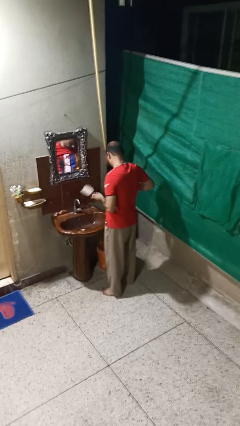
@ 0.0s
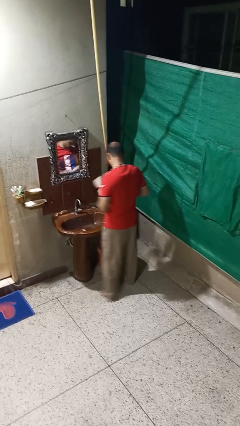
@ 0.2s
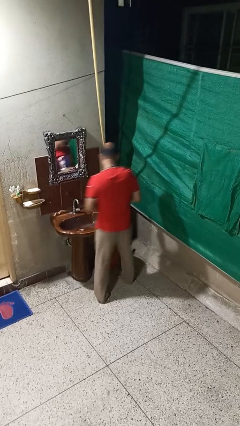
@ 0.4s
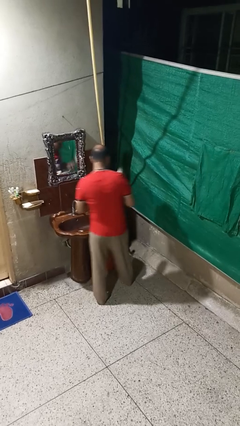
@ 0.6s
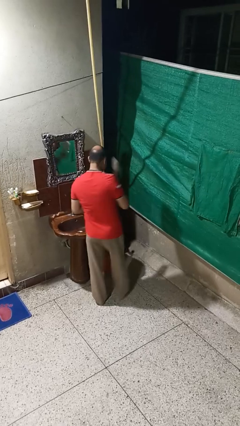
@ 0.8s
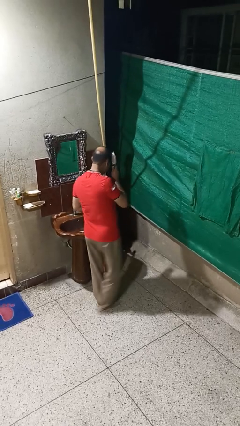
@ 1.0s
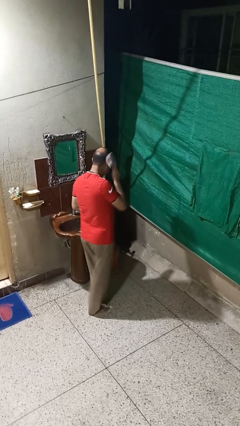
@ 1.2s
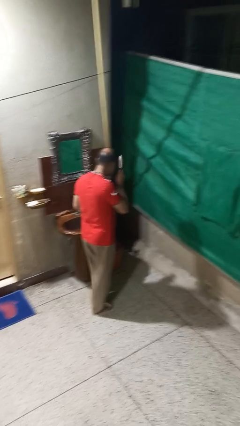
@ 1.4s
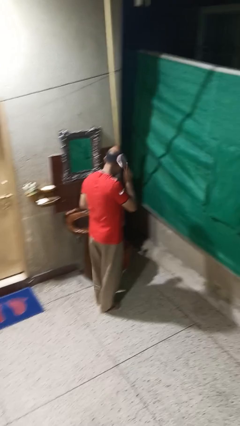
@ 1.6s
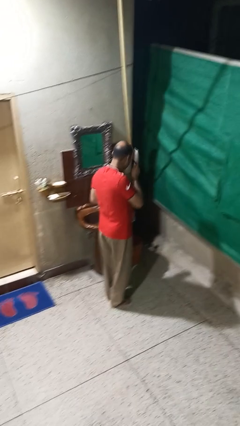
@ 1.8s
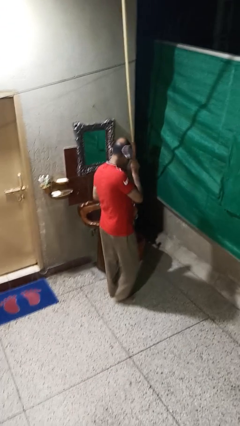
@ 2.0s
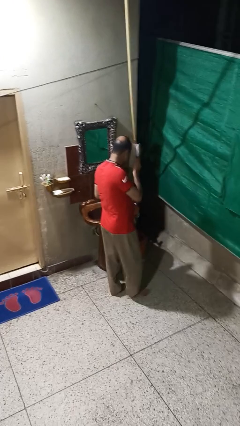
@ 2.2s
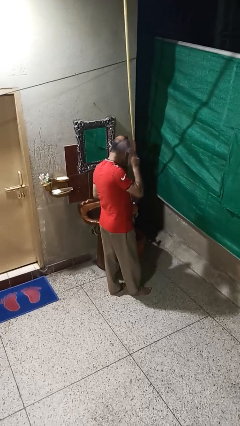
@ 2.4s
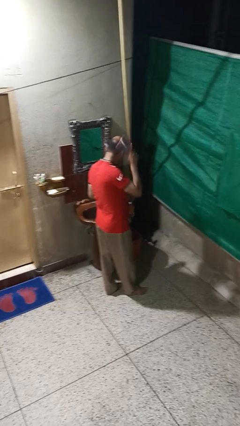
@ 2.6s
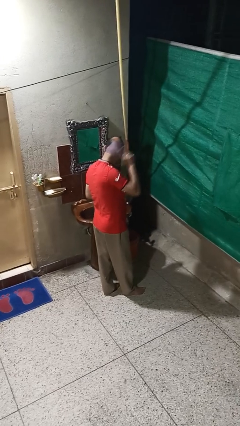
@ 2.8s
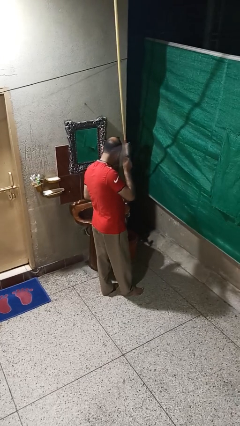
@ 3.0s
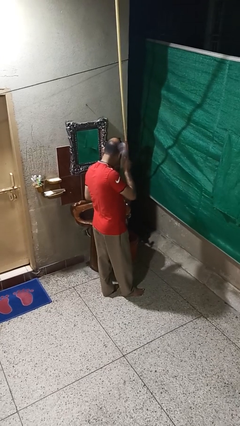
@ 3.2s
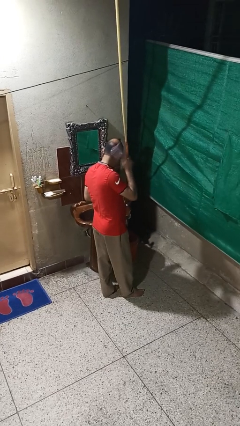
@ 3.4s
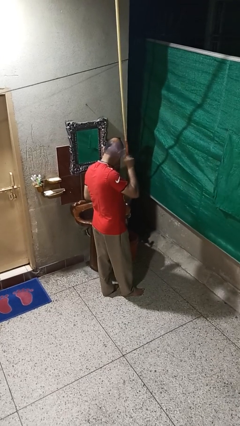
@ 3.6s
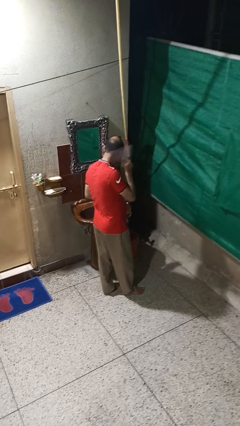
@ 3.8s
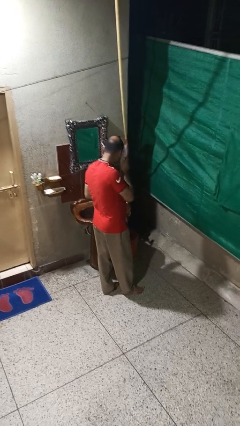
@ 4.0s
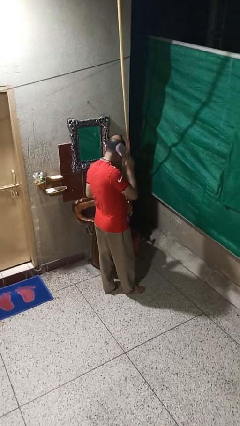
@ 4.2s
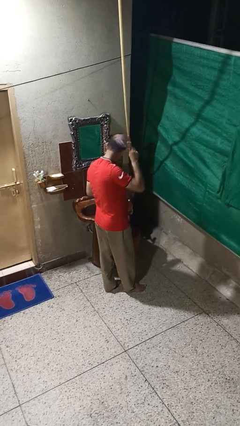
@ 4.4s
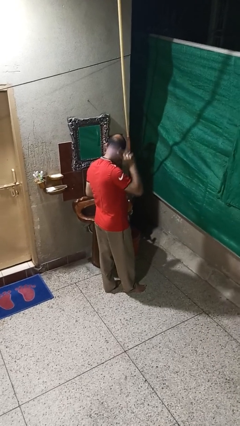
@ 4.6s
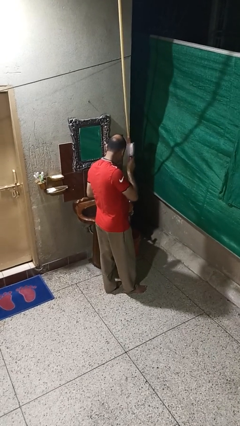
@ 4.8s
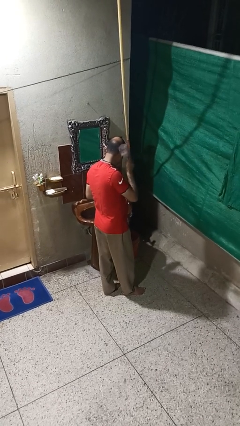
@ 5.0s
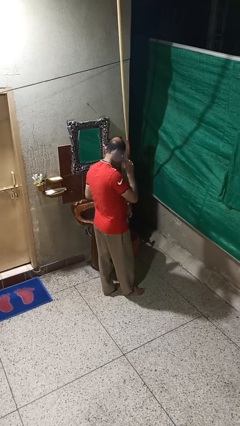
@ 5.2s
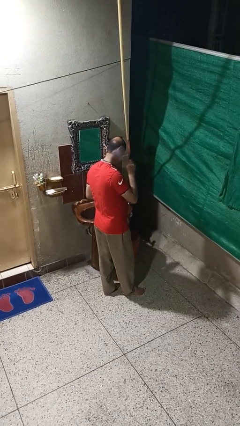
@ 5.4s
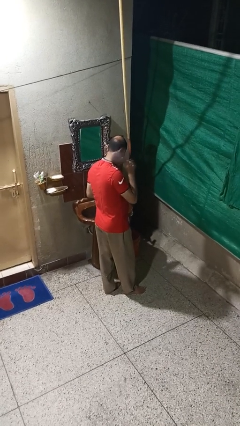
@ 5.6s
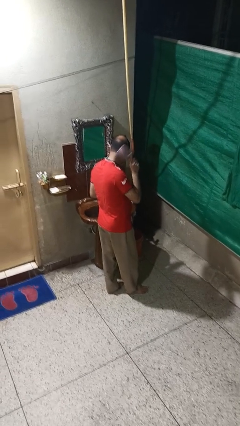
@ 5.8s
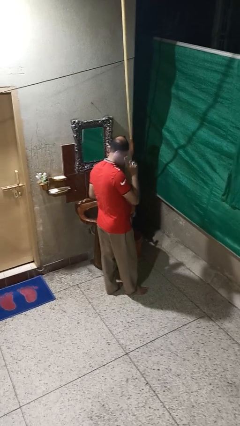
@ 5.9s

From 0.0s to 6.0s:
person brushes hair

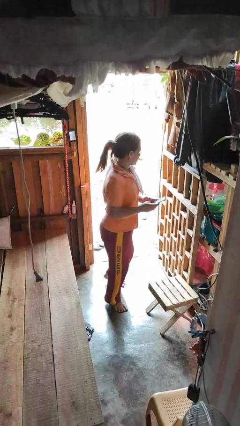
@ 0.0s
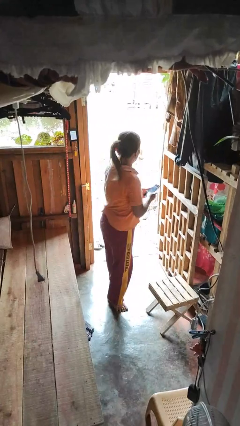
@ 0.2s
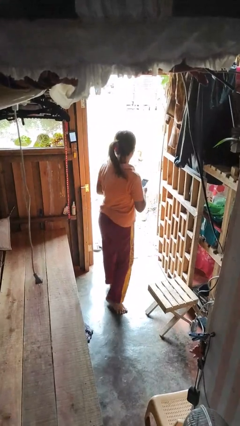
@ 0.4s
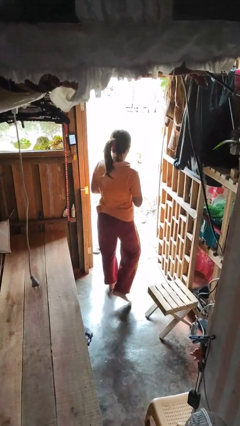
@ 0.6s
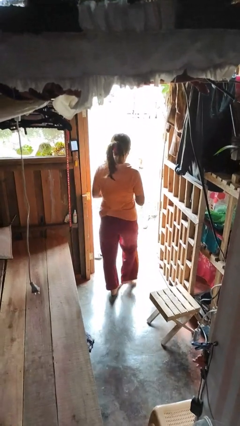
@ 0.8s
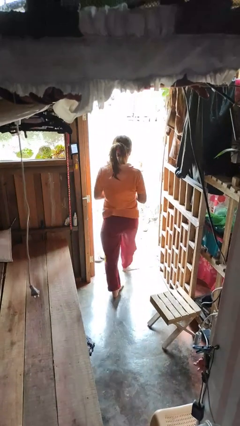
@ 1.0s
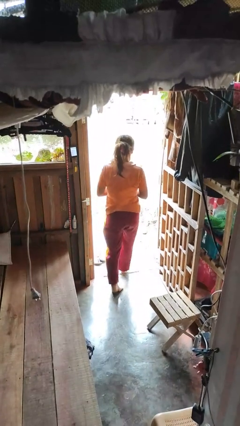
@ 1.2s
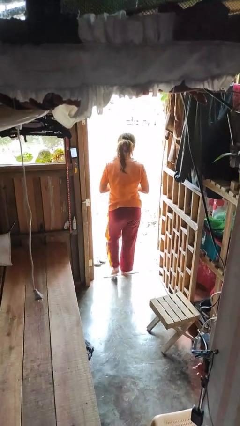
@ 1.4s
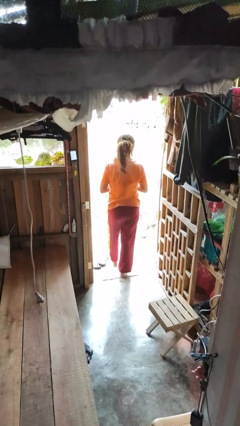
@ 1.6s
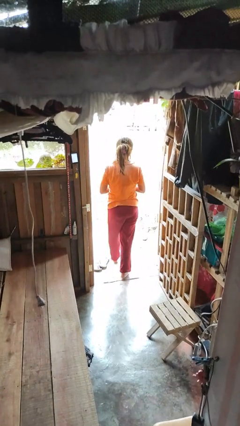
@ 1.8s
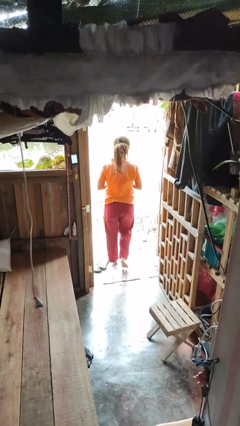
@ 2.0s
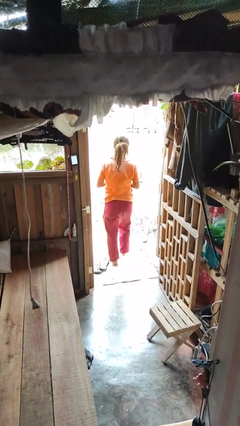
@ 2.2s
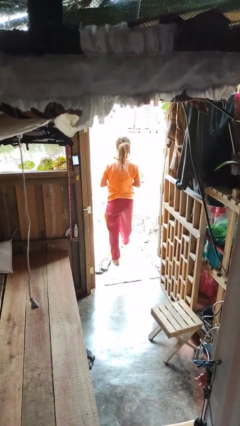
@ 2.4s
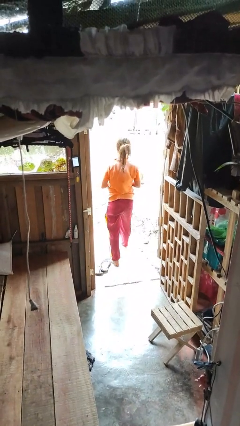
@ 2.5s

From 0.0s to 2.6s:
person exits scene through structure

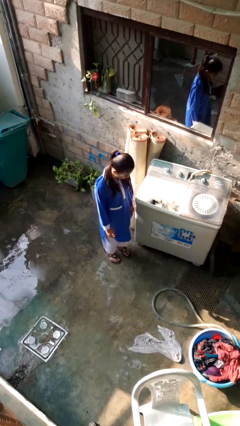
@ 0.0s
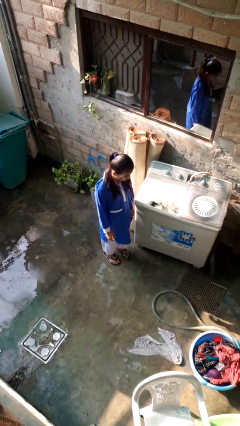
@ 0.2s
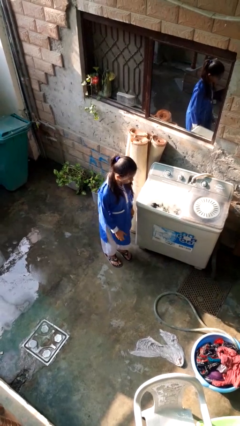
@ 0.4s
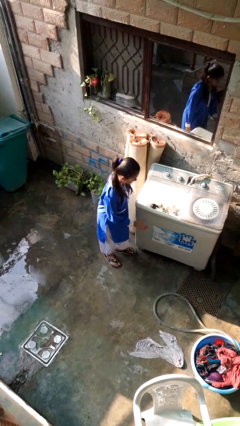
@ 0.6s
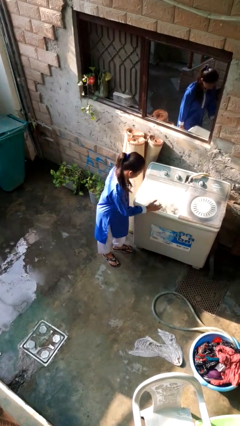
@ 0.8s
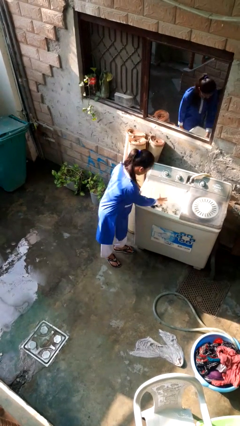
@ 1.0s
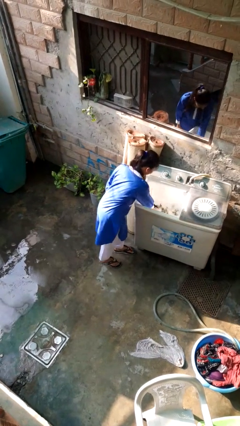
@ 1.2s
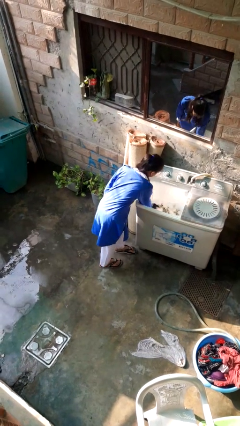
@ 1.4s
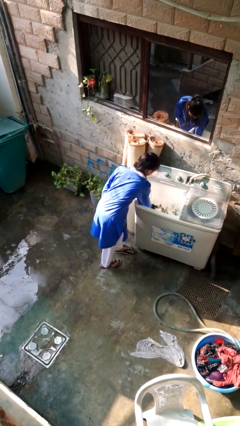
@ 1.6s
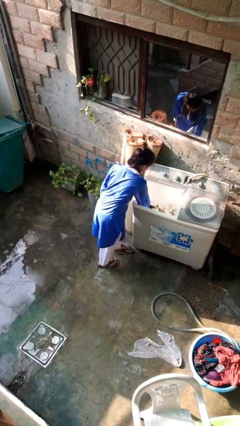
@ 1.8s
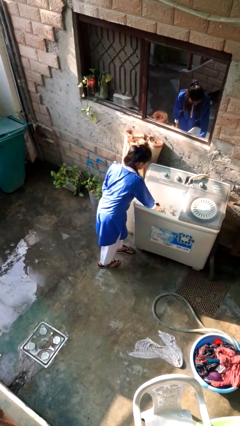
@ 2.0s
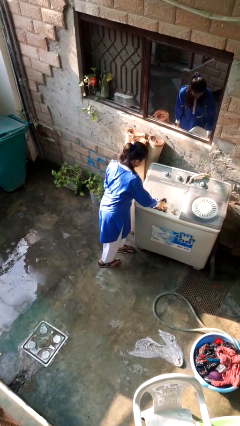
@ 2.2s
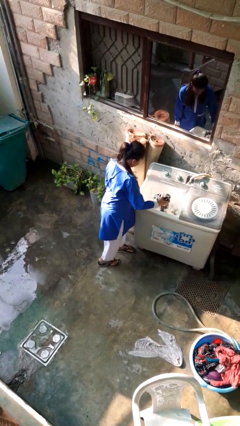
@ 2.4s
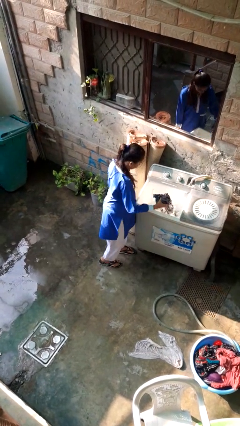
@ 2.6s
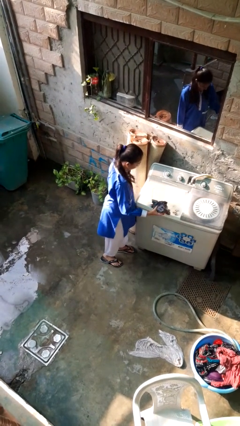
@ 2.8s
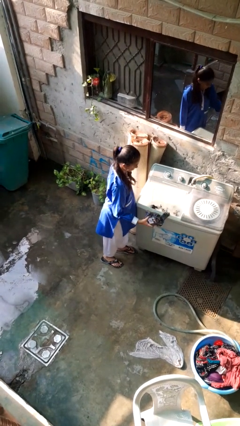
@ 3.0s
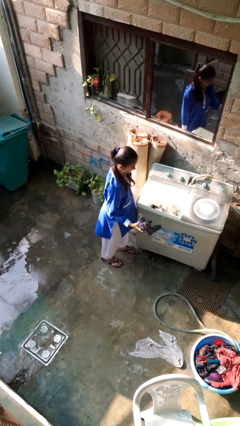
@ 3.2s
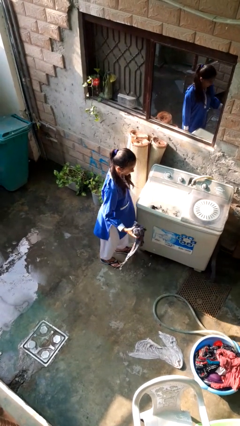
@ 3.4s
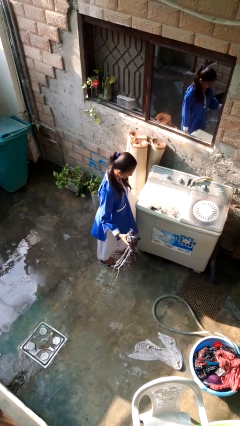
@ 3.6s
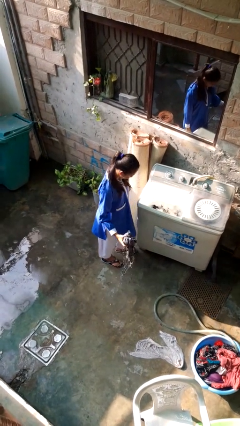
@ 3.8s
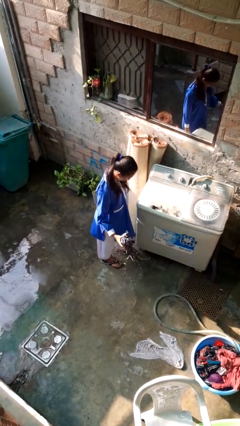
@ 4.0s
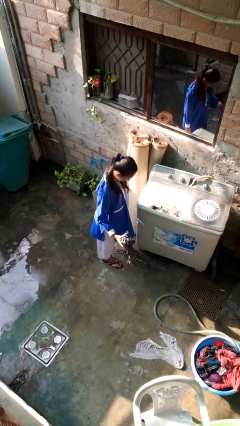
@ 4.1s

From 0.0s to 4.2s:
person unloads clotheswasher

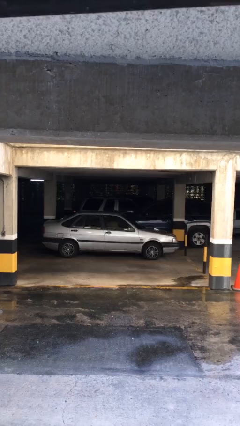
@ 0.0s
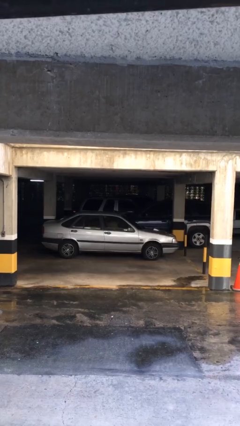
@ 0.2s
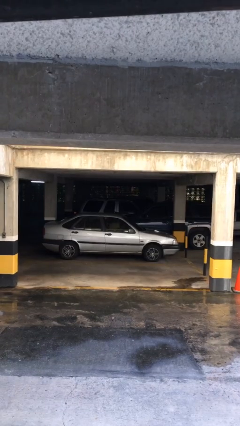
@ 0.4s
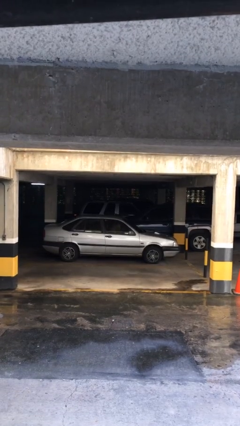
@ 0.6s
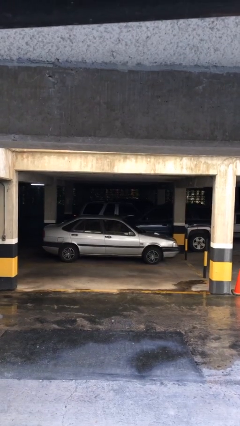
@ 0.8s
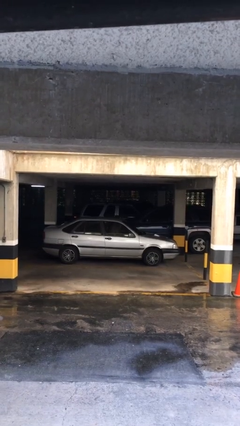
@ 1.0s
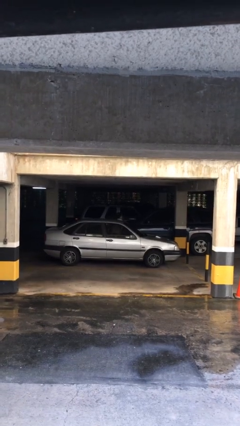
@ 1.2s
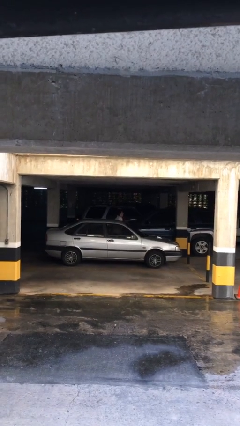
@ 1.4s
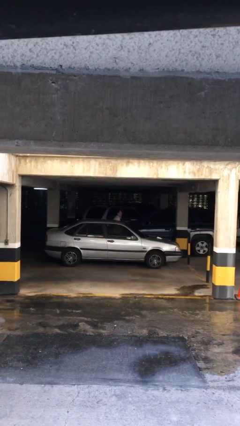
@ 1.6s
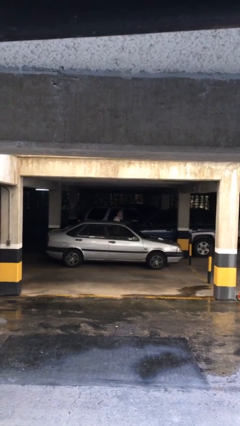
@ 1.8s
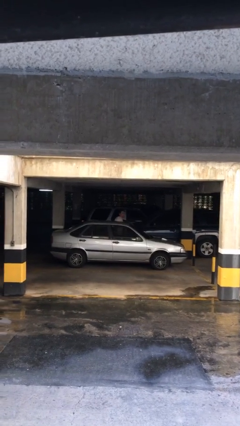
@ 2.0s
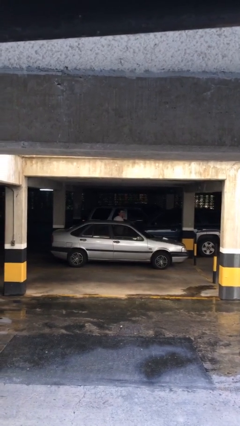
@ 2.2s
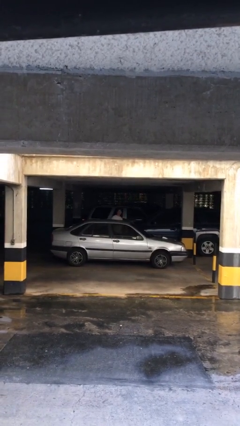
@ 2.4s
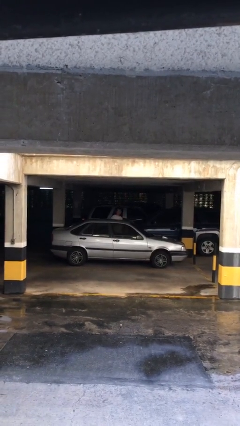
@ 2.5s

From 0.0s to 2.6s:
person exits car

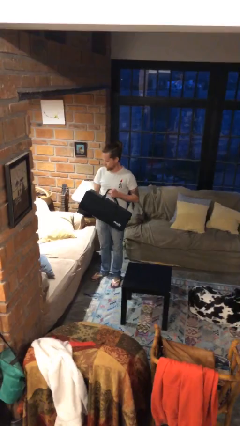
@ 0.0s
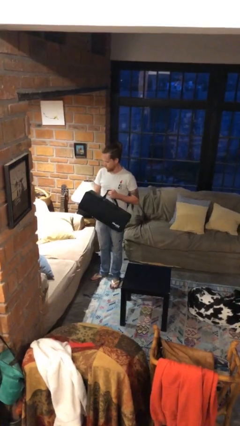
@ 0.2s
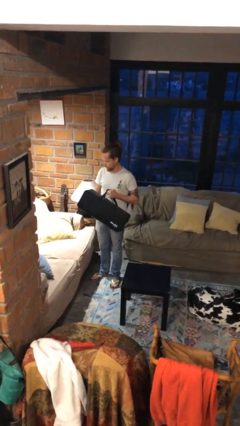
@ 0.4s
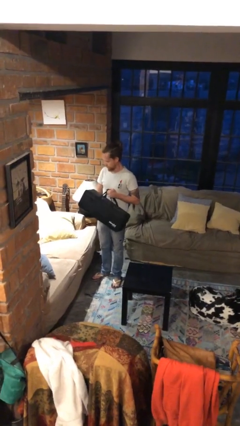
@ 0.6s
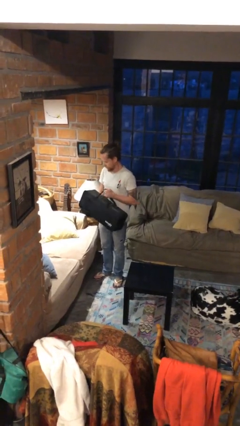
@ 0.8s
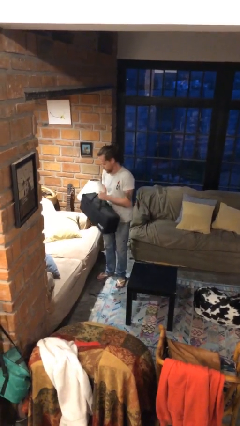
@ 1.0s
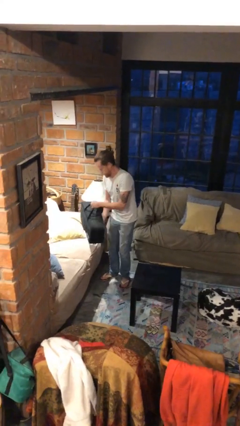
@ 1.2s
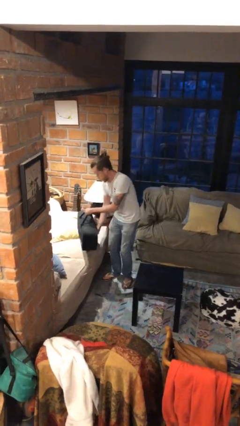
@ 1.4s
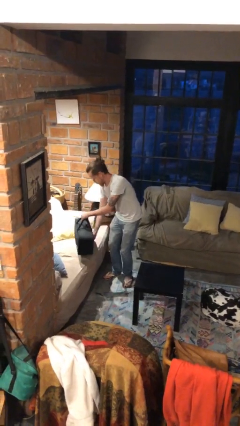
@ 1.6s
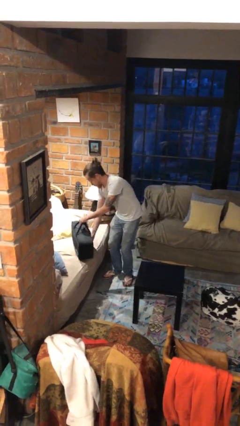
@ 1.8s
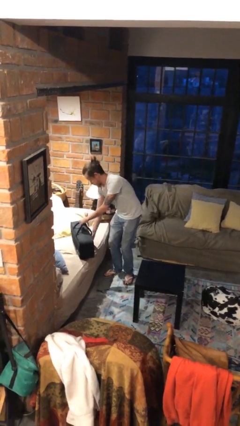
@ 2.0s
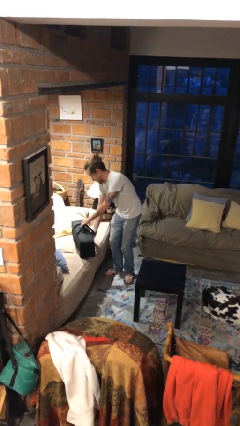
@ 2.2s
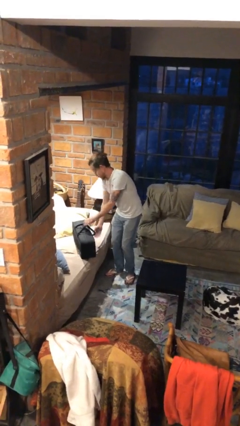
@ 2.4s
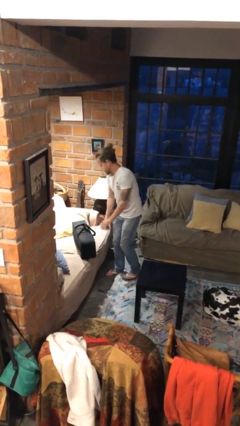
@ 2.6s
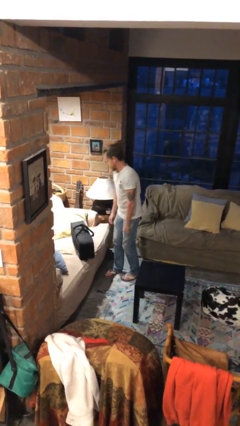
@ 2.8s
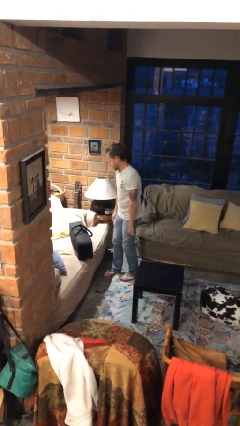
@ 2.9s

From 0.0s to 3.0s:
person puts down object on couch
